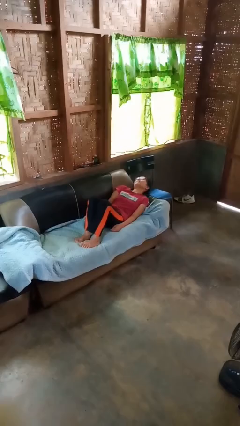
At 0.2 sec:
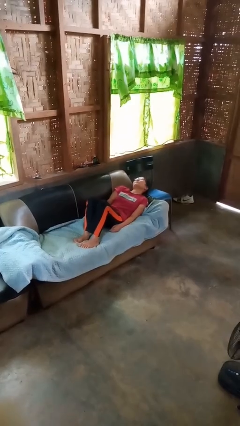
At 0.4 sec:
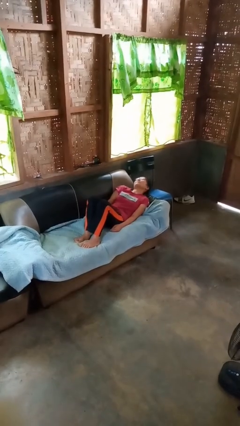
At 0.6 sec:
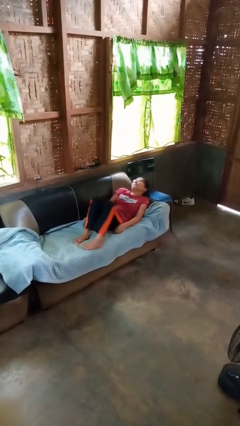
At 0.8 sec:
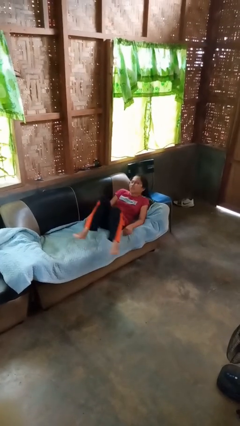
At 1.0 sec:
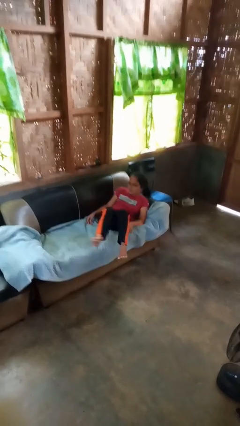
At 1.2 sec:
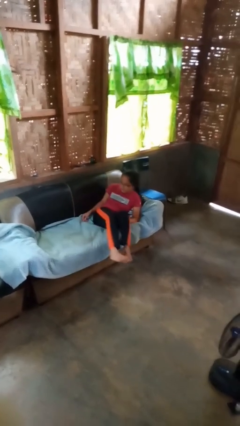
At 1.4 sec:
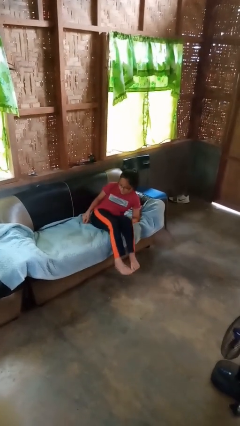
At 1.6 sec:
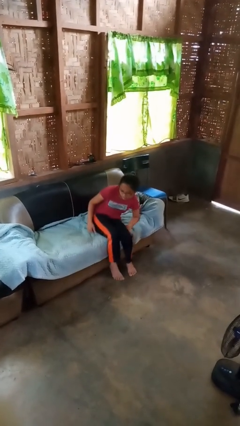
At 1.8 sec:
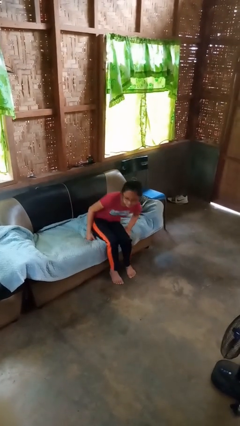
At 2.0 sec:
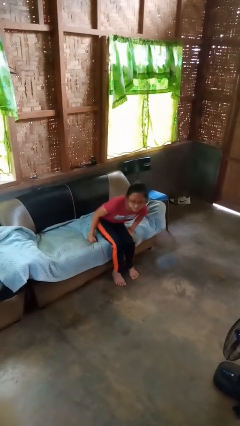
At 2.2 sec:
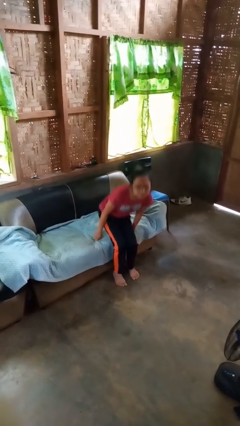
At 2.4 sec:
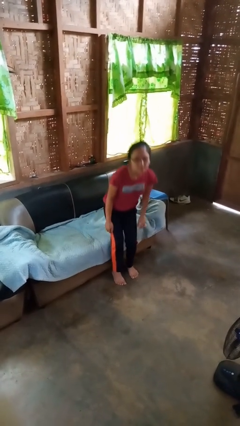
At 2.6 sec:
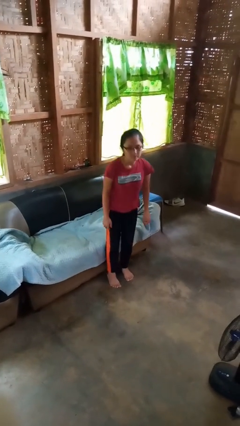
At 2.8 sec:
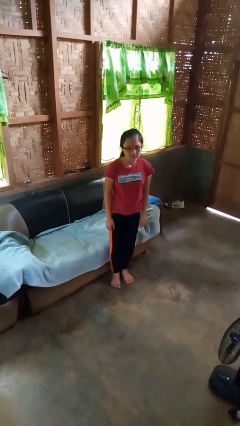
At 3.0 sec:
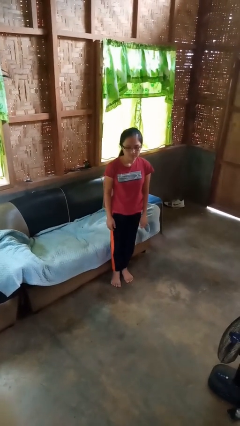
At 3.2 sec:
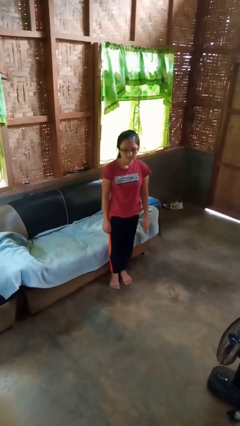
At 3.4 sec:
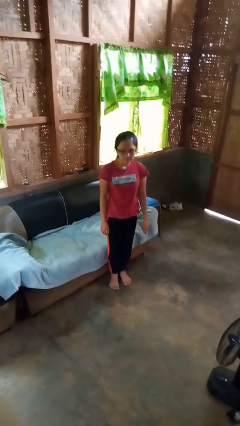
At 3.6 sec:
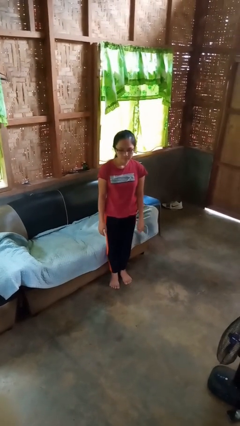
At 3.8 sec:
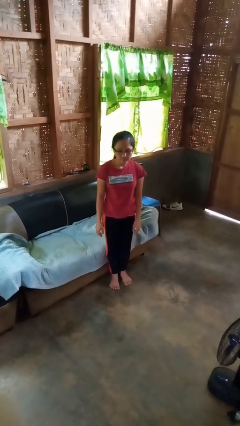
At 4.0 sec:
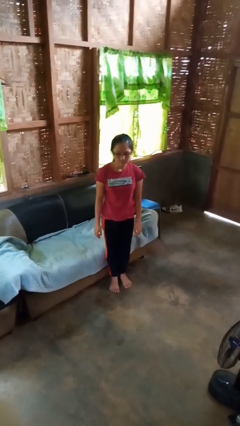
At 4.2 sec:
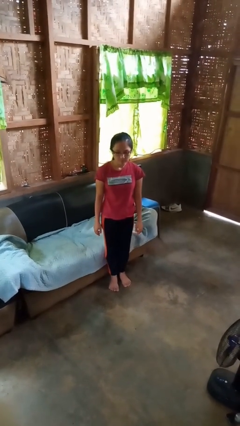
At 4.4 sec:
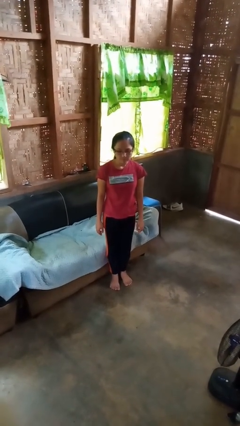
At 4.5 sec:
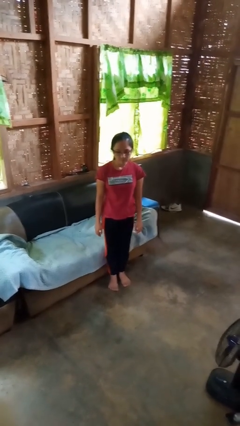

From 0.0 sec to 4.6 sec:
person stands up

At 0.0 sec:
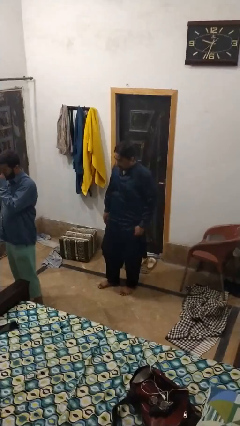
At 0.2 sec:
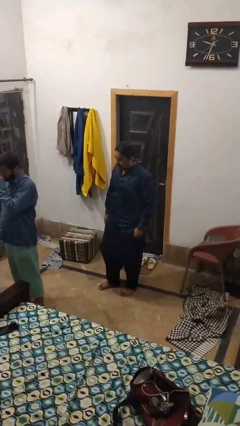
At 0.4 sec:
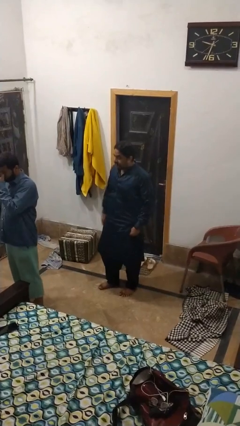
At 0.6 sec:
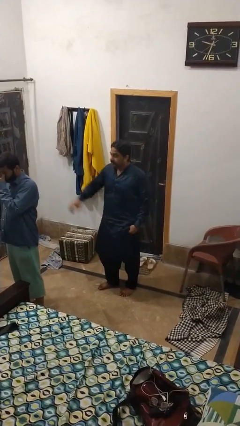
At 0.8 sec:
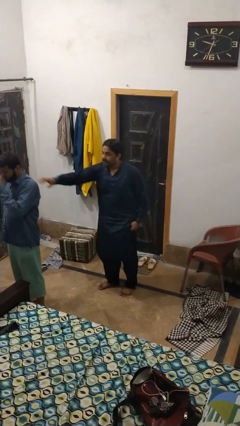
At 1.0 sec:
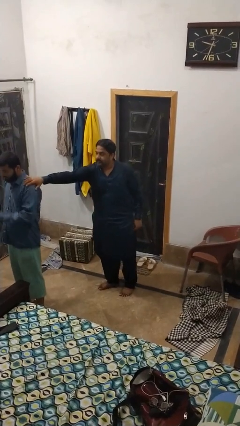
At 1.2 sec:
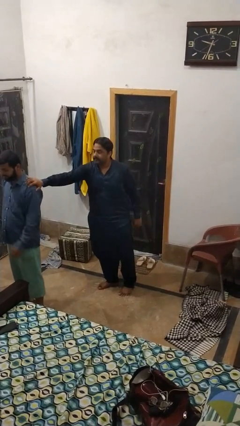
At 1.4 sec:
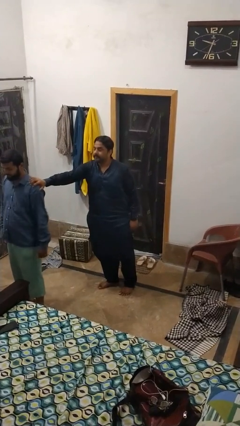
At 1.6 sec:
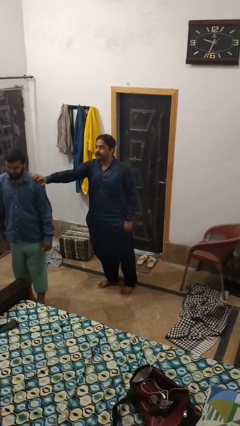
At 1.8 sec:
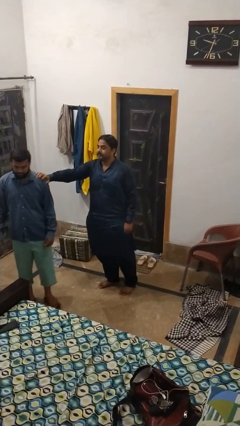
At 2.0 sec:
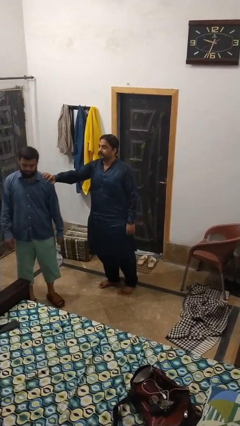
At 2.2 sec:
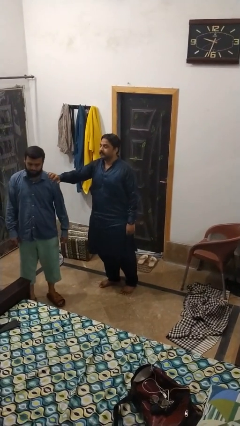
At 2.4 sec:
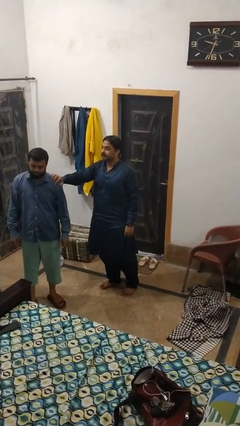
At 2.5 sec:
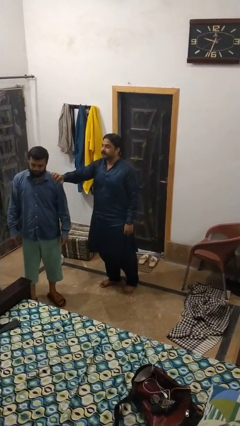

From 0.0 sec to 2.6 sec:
person grabs person by shoulder

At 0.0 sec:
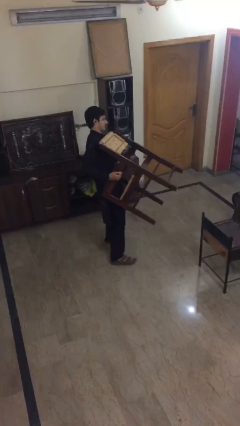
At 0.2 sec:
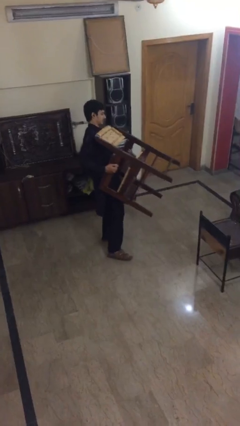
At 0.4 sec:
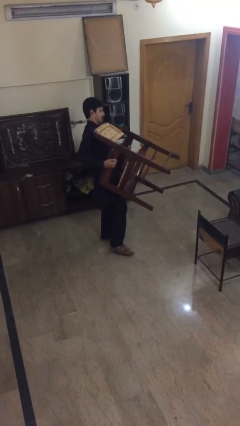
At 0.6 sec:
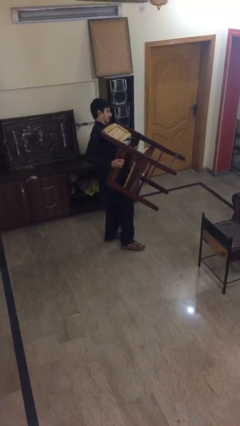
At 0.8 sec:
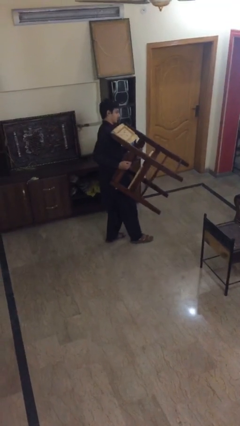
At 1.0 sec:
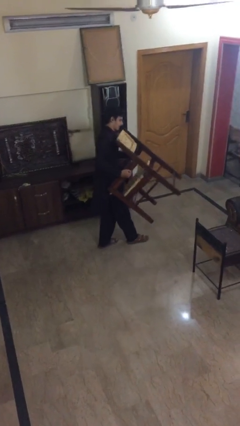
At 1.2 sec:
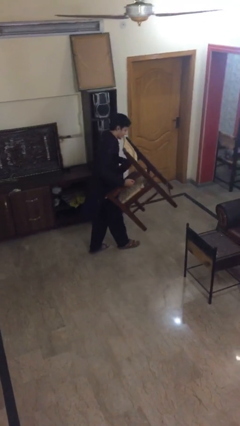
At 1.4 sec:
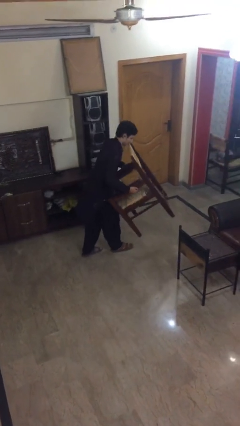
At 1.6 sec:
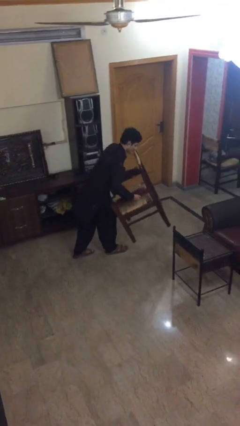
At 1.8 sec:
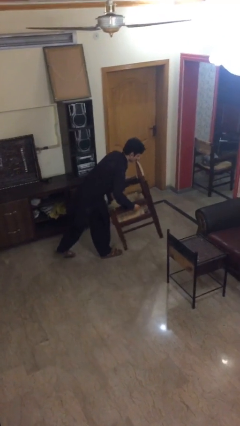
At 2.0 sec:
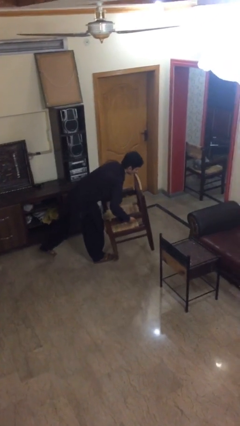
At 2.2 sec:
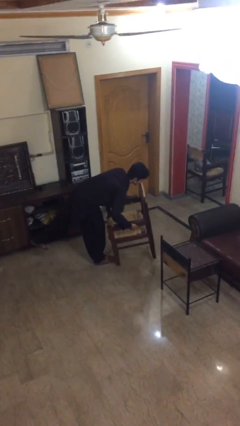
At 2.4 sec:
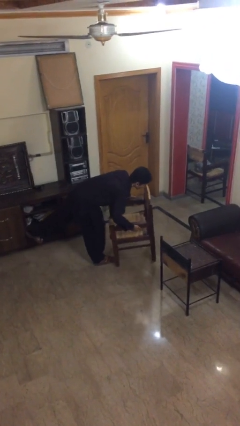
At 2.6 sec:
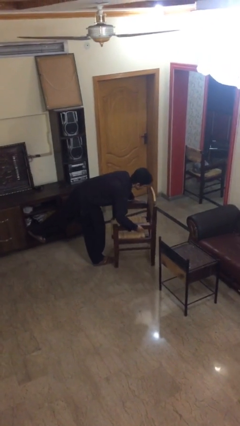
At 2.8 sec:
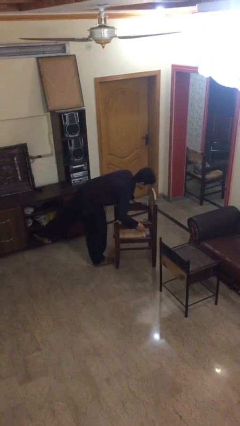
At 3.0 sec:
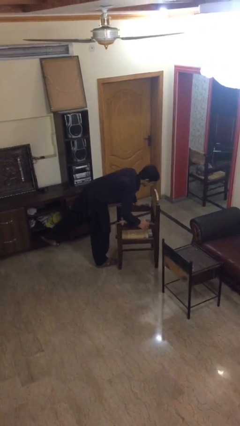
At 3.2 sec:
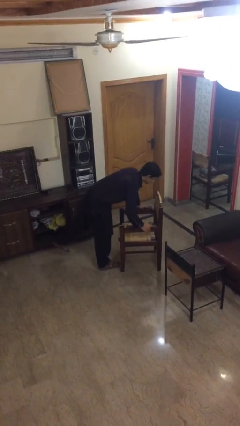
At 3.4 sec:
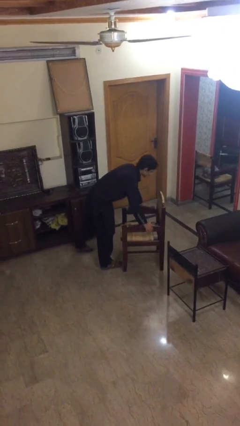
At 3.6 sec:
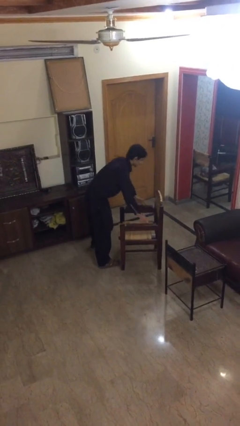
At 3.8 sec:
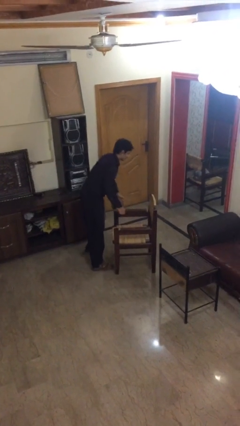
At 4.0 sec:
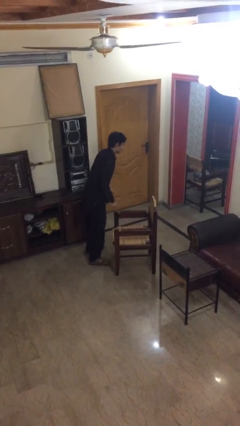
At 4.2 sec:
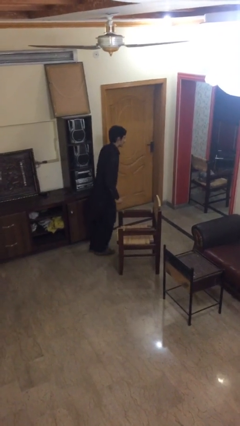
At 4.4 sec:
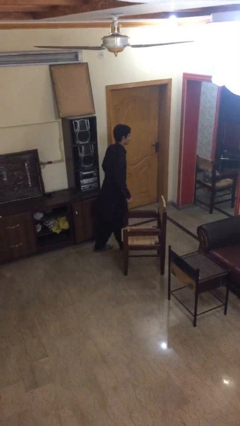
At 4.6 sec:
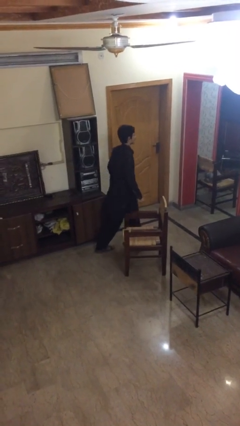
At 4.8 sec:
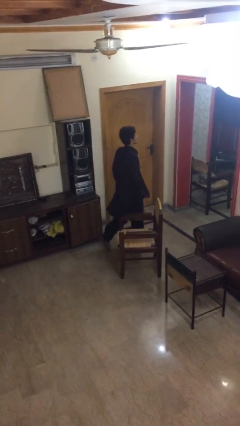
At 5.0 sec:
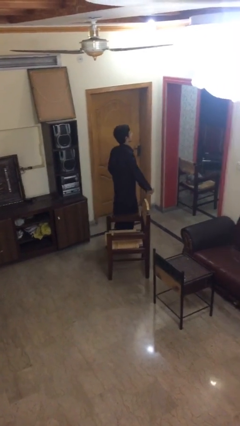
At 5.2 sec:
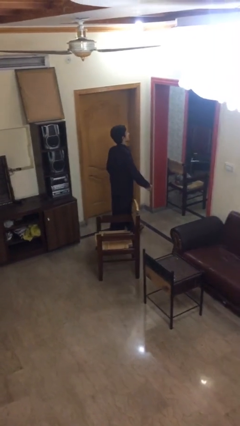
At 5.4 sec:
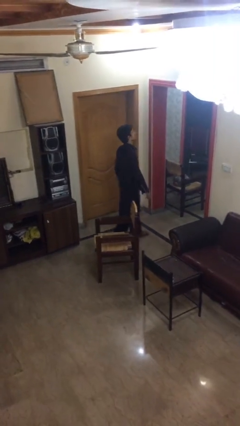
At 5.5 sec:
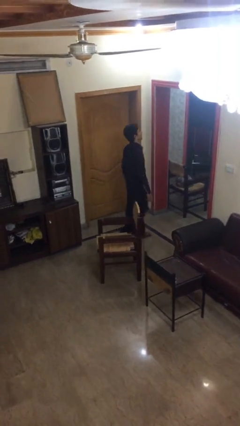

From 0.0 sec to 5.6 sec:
person puts down object on floor

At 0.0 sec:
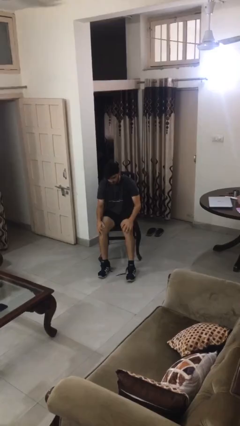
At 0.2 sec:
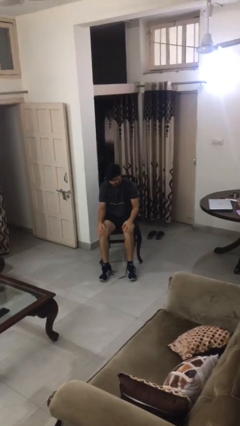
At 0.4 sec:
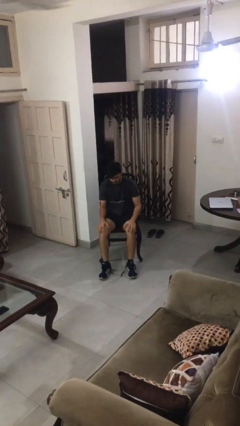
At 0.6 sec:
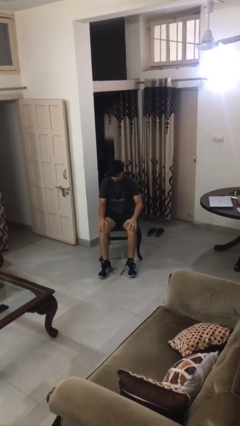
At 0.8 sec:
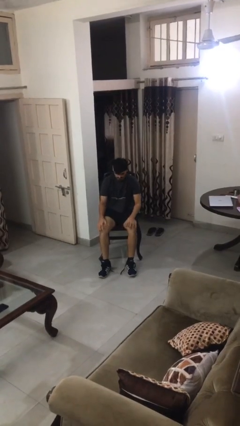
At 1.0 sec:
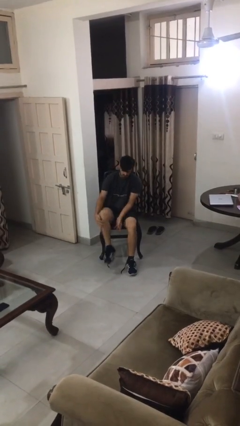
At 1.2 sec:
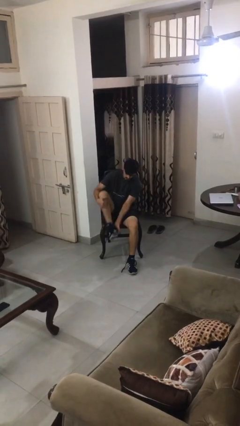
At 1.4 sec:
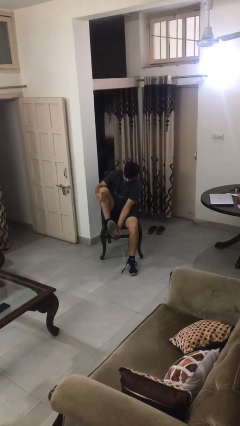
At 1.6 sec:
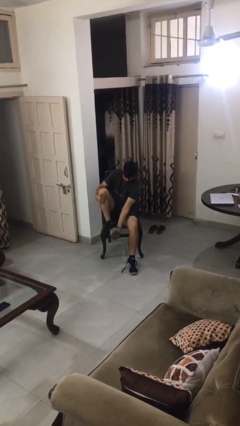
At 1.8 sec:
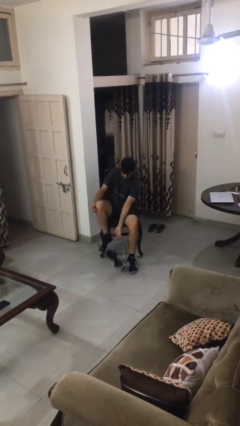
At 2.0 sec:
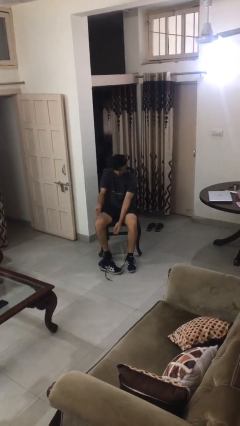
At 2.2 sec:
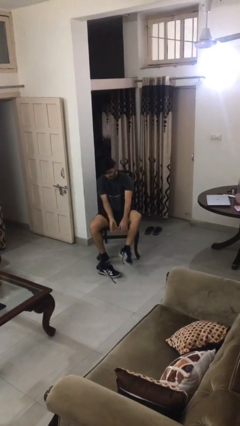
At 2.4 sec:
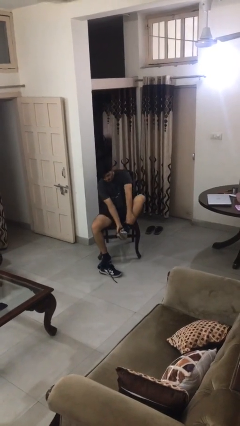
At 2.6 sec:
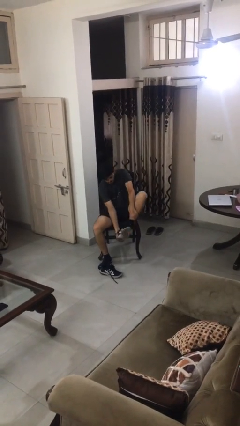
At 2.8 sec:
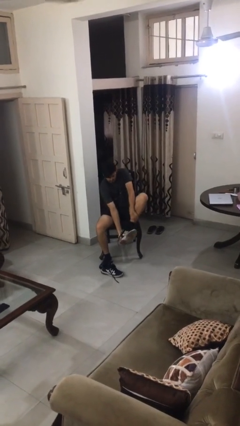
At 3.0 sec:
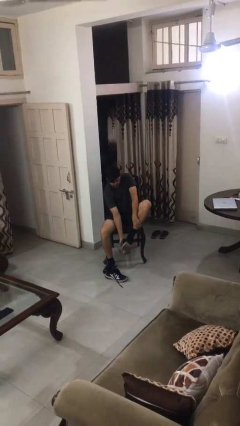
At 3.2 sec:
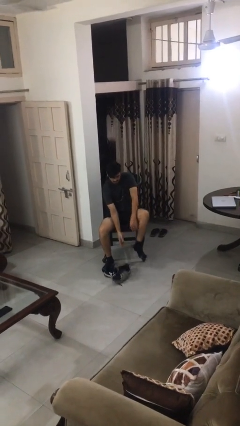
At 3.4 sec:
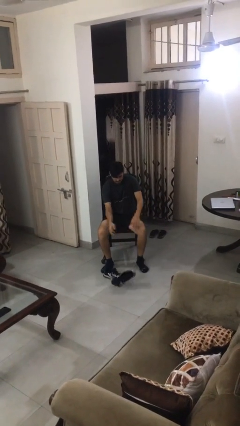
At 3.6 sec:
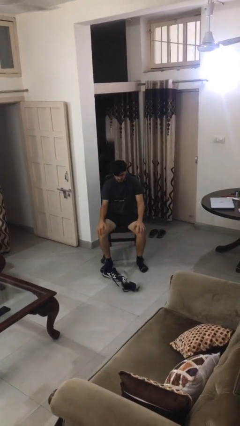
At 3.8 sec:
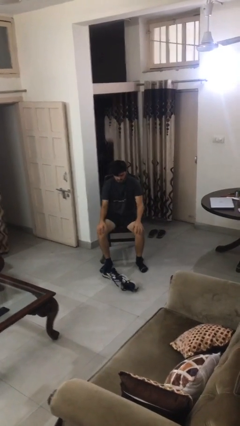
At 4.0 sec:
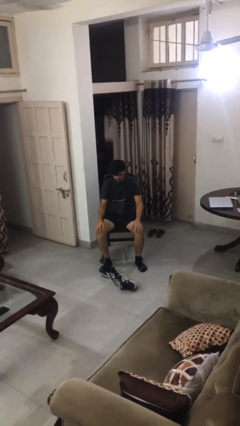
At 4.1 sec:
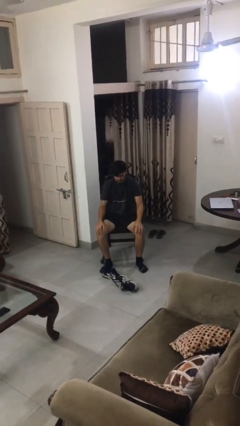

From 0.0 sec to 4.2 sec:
person takes off shoes

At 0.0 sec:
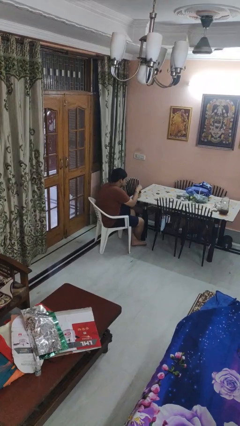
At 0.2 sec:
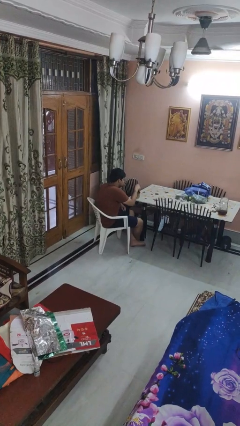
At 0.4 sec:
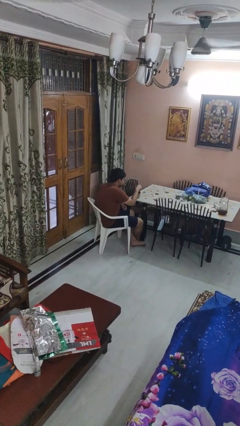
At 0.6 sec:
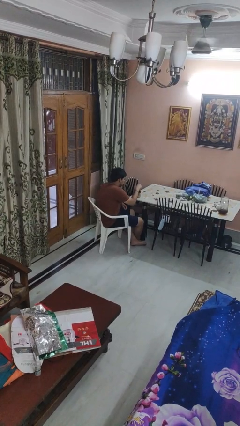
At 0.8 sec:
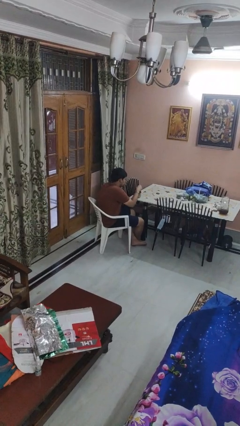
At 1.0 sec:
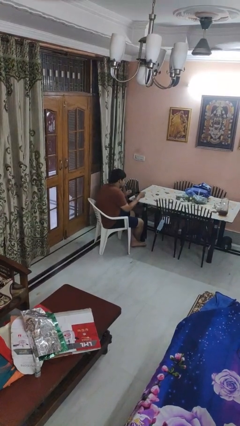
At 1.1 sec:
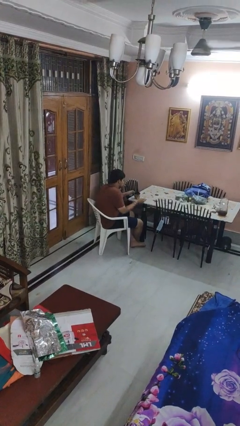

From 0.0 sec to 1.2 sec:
person stirs mug
